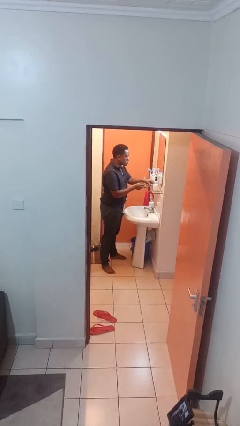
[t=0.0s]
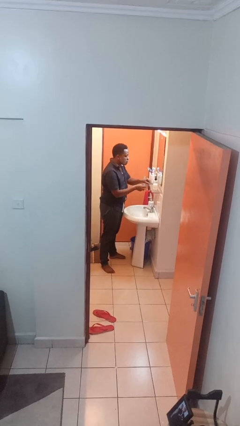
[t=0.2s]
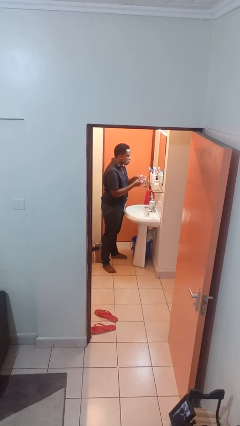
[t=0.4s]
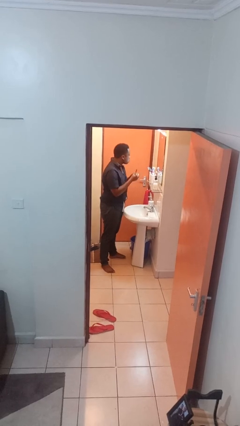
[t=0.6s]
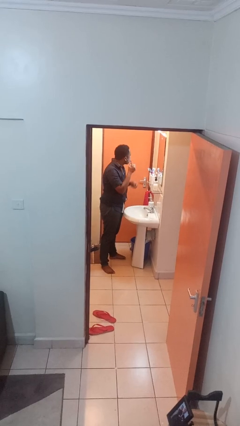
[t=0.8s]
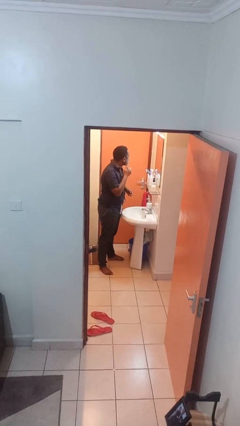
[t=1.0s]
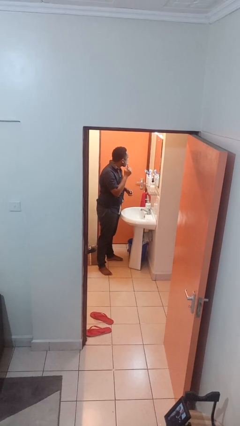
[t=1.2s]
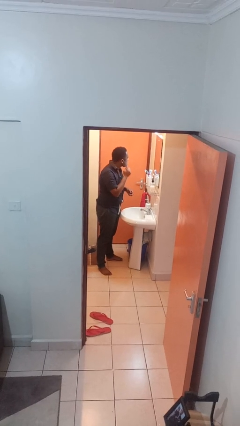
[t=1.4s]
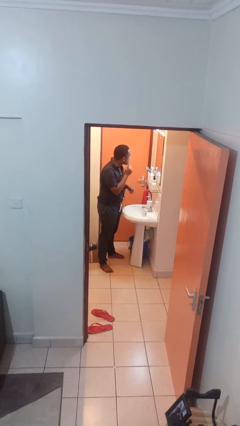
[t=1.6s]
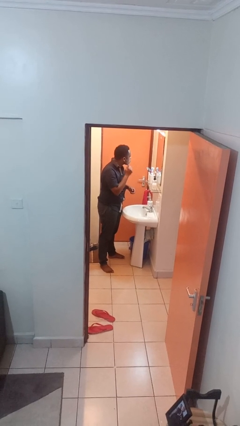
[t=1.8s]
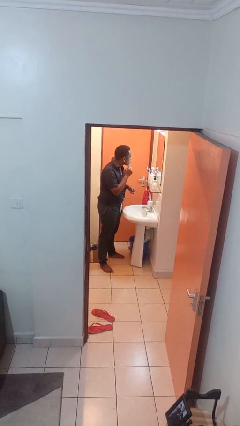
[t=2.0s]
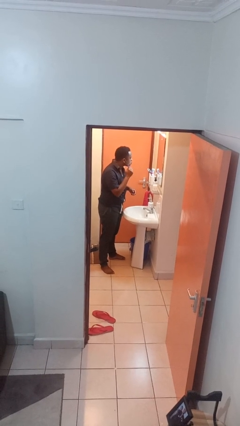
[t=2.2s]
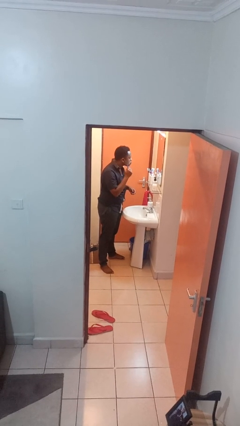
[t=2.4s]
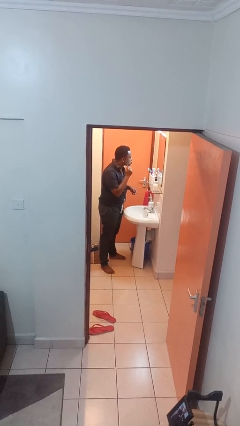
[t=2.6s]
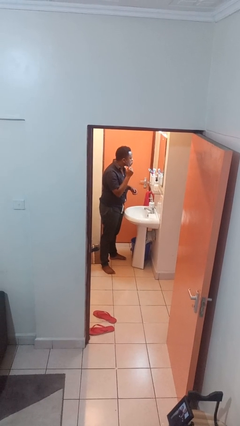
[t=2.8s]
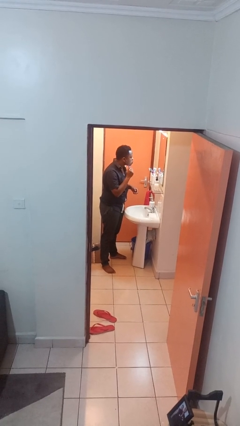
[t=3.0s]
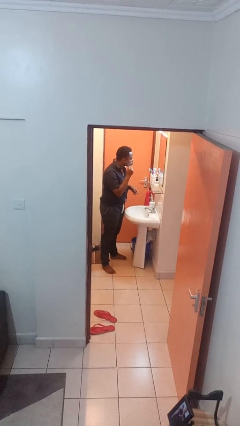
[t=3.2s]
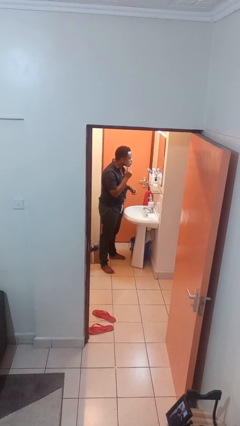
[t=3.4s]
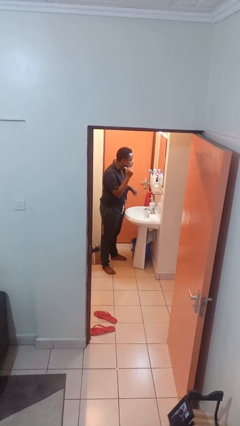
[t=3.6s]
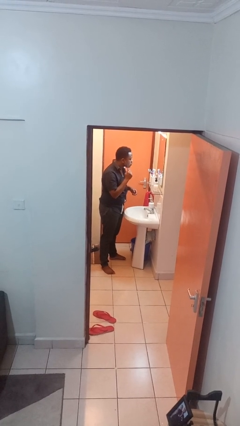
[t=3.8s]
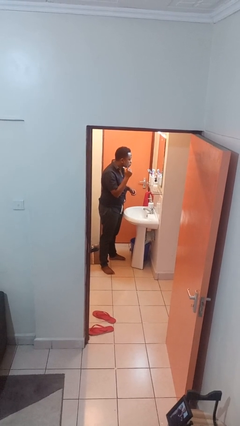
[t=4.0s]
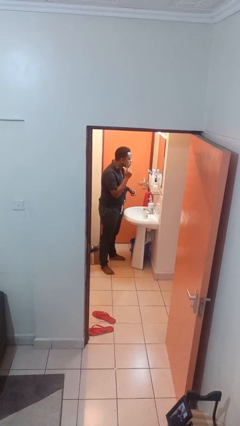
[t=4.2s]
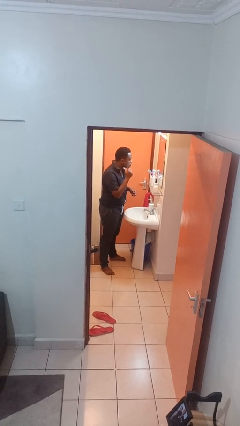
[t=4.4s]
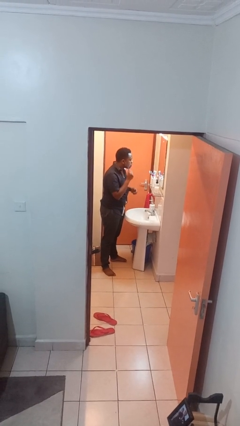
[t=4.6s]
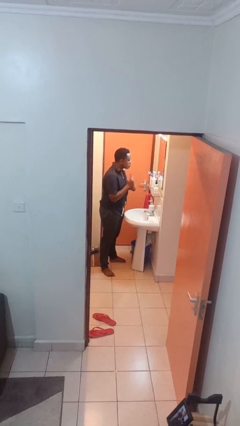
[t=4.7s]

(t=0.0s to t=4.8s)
person shaves face

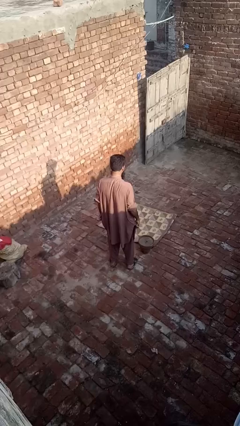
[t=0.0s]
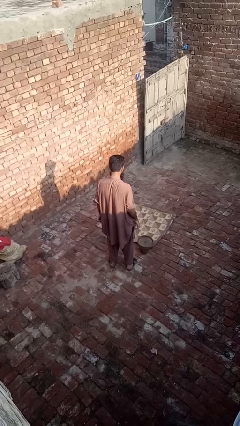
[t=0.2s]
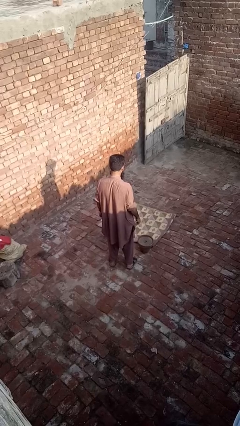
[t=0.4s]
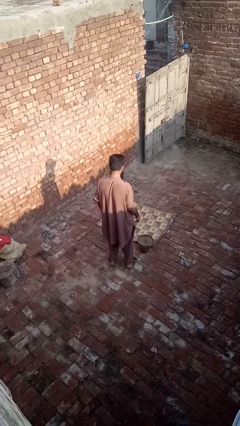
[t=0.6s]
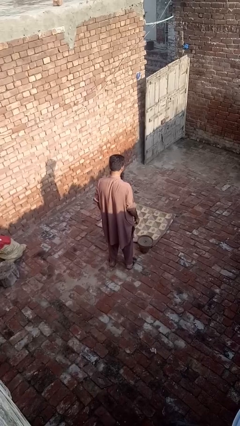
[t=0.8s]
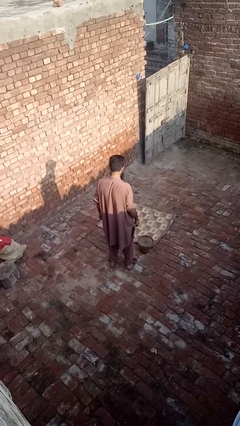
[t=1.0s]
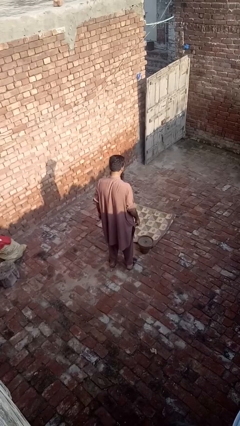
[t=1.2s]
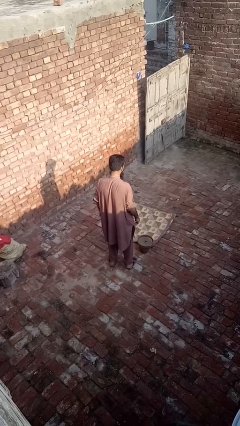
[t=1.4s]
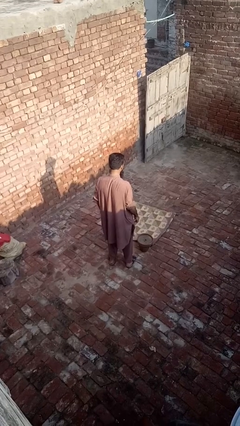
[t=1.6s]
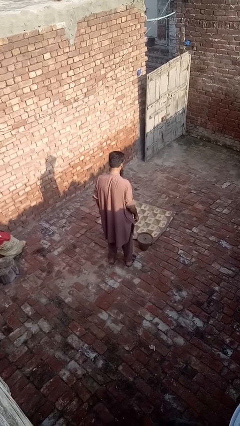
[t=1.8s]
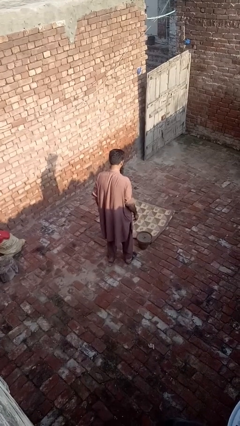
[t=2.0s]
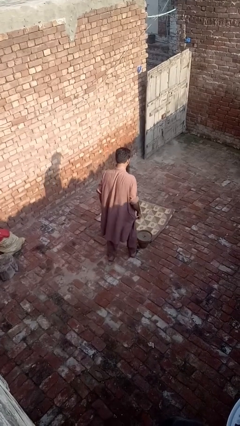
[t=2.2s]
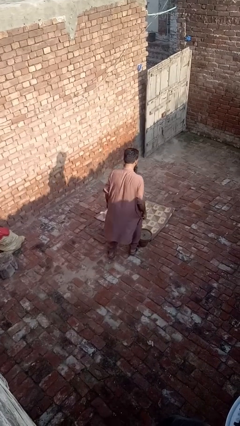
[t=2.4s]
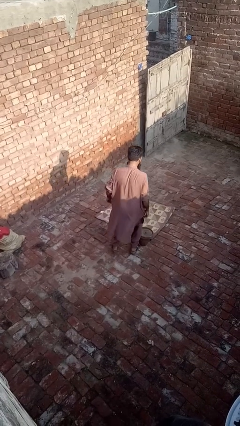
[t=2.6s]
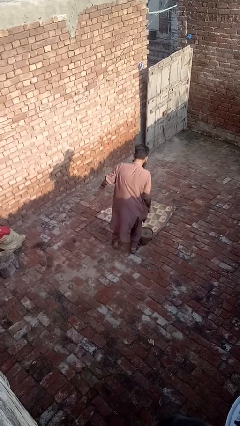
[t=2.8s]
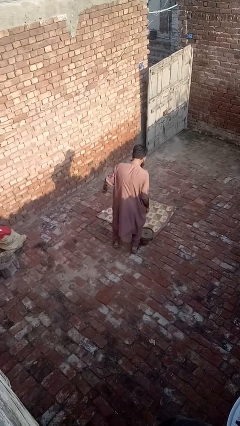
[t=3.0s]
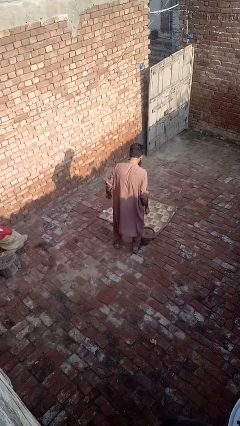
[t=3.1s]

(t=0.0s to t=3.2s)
person trips on object on floor

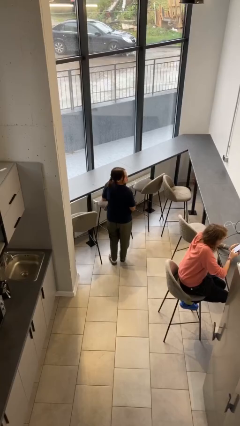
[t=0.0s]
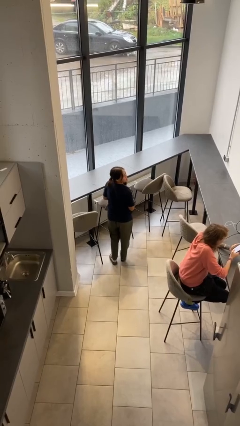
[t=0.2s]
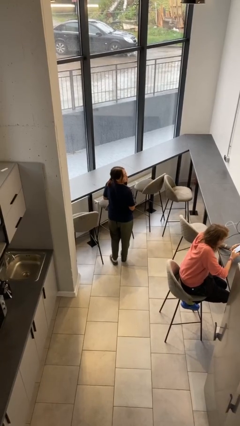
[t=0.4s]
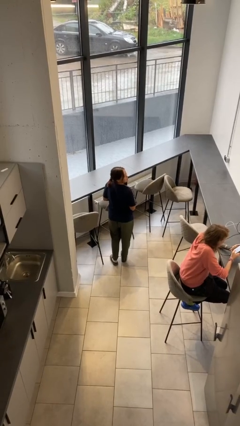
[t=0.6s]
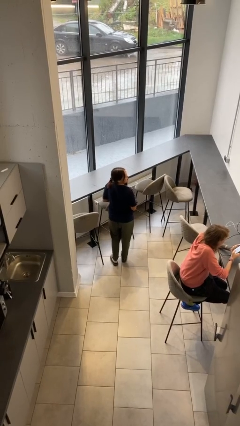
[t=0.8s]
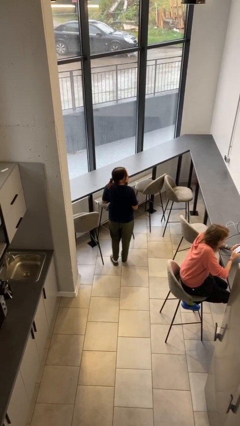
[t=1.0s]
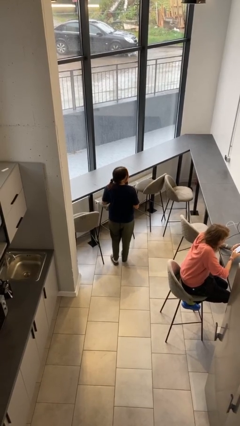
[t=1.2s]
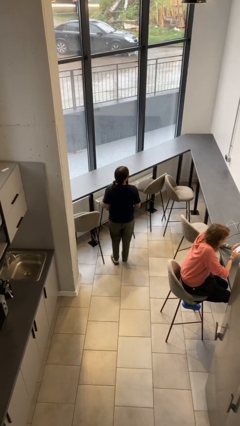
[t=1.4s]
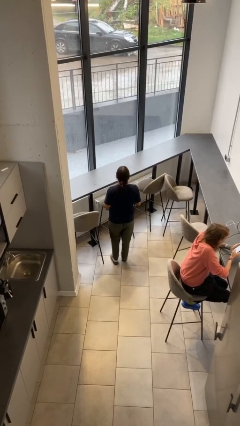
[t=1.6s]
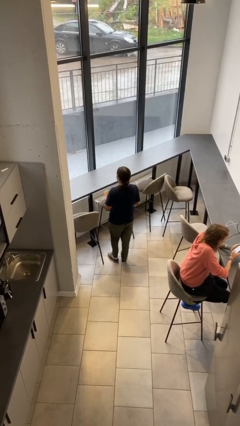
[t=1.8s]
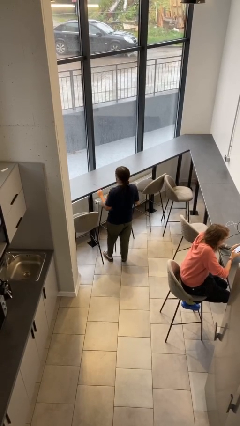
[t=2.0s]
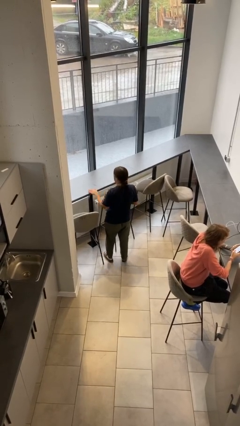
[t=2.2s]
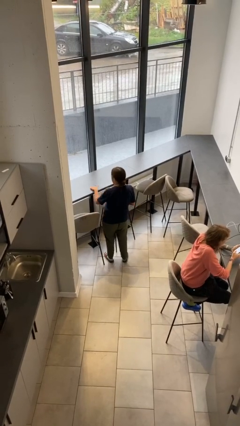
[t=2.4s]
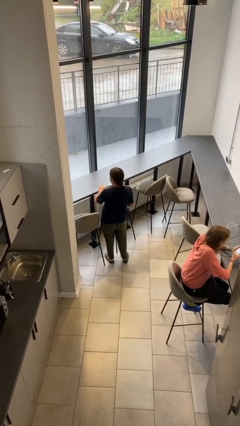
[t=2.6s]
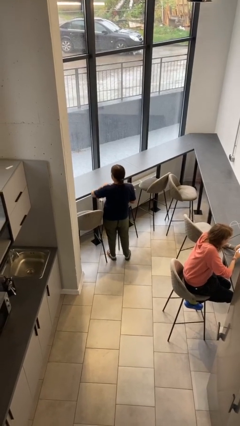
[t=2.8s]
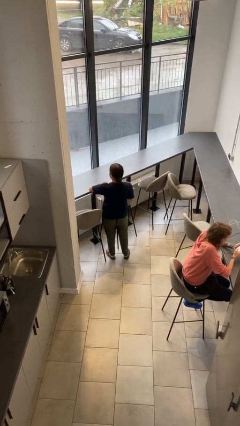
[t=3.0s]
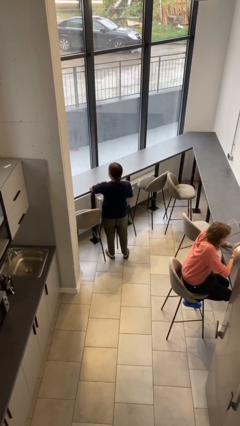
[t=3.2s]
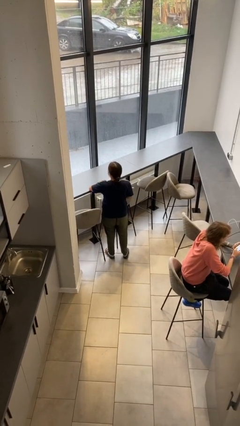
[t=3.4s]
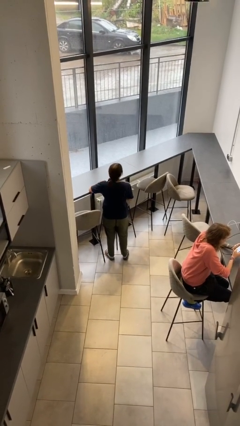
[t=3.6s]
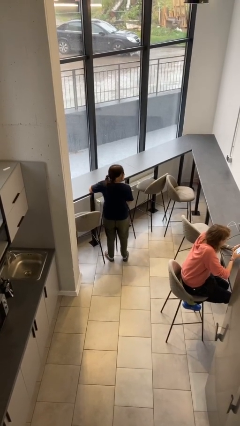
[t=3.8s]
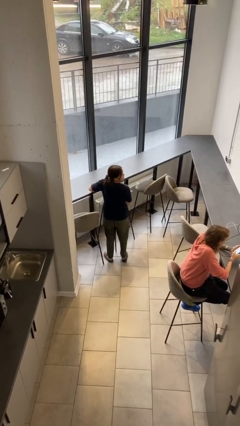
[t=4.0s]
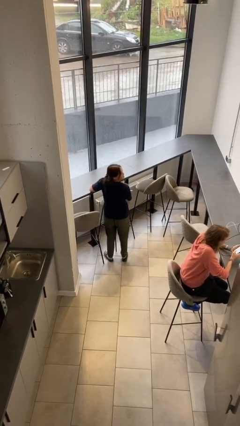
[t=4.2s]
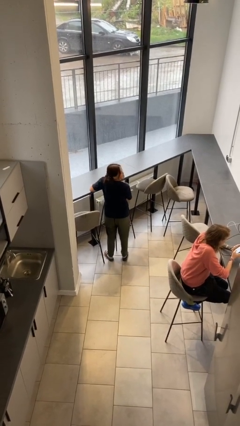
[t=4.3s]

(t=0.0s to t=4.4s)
person looks over shoulder

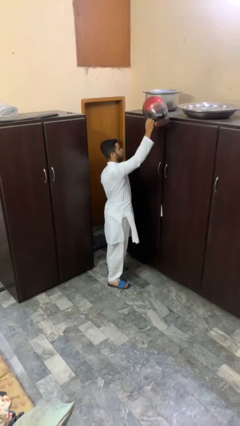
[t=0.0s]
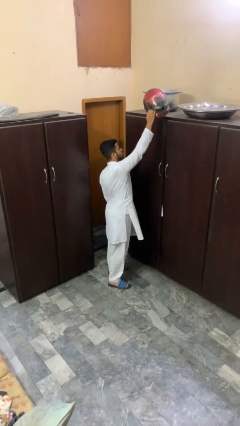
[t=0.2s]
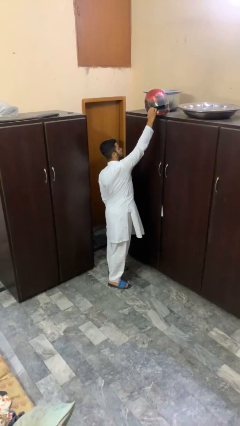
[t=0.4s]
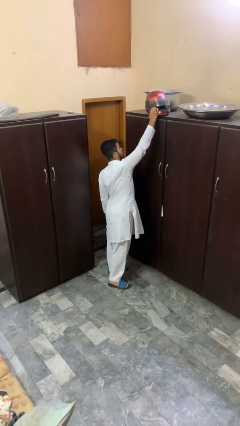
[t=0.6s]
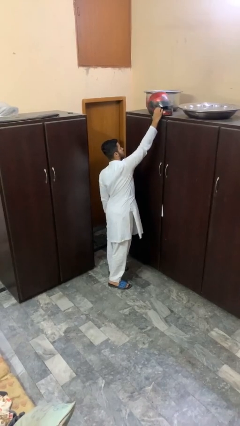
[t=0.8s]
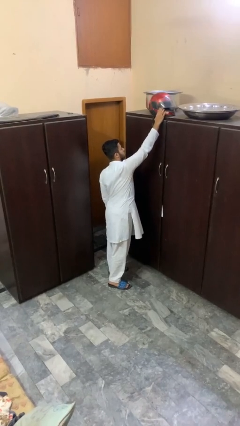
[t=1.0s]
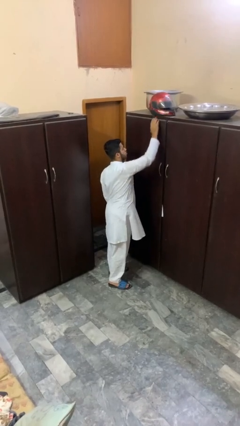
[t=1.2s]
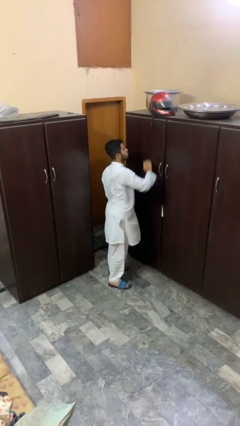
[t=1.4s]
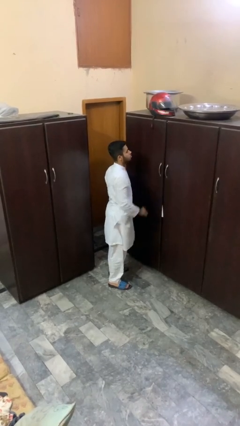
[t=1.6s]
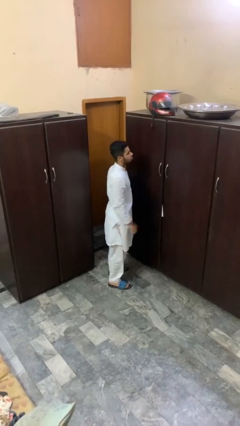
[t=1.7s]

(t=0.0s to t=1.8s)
person puts down object on shelf

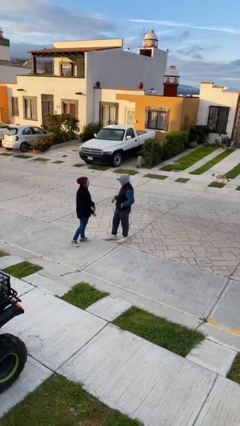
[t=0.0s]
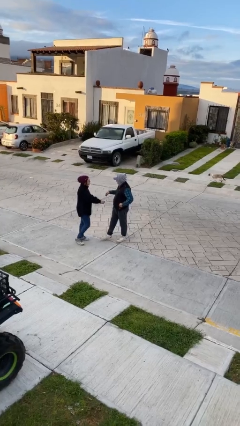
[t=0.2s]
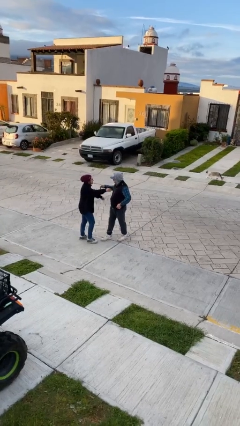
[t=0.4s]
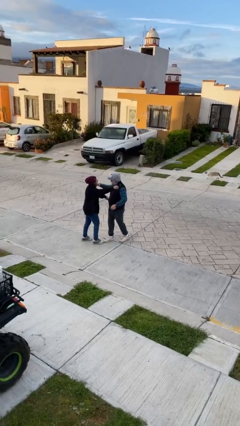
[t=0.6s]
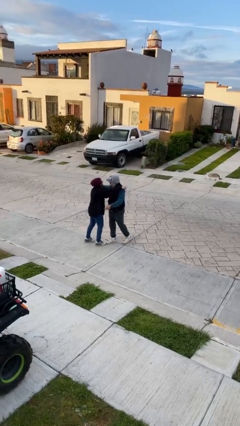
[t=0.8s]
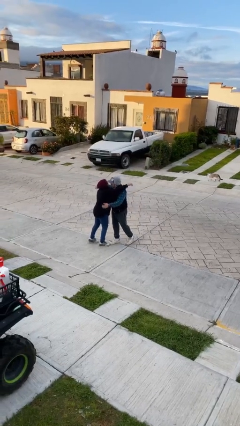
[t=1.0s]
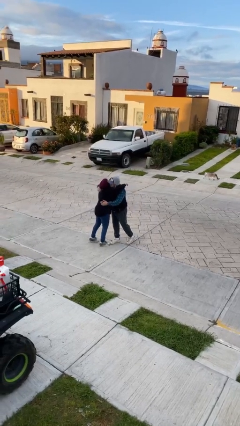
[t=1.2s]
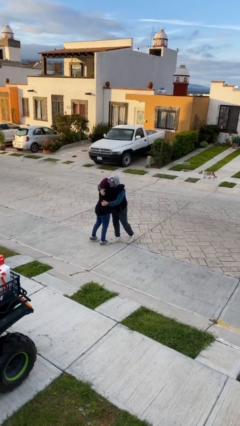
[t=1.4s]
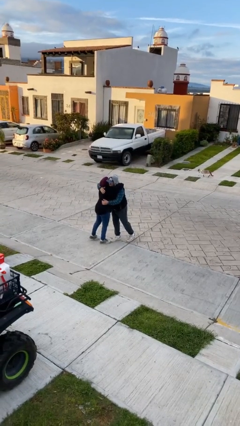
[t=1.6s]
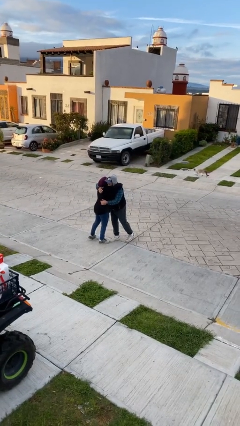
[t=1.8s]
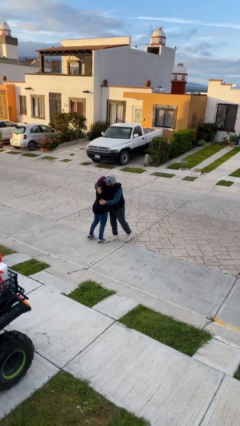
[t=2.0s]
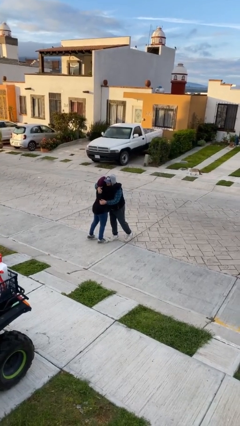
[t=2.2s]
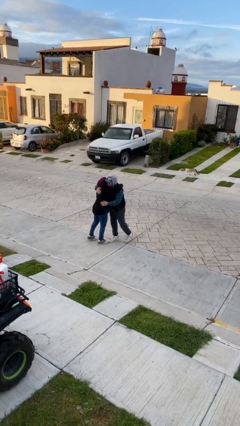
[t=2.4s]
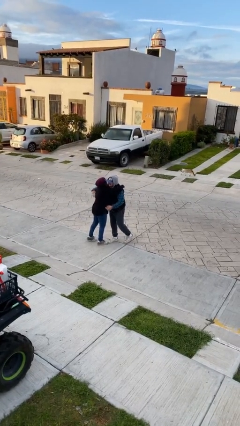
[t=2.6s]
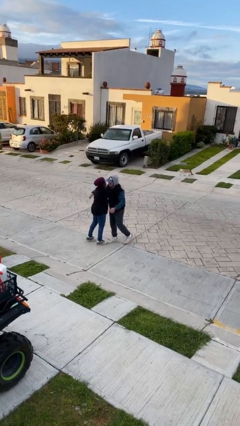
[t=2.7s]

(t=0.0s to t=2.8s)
person embraces person

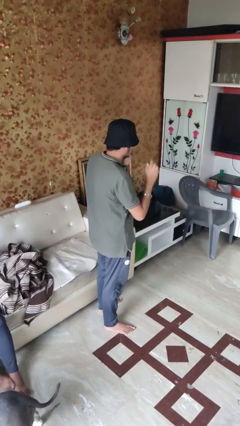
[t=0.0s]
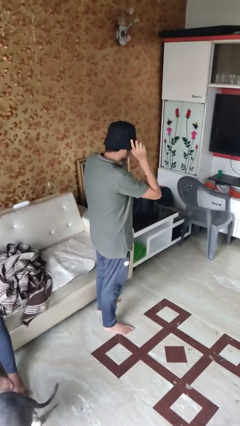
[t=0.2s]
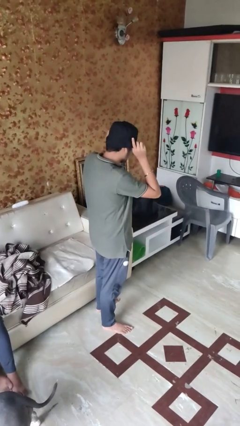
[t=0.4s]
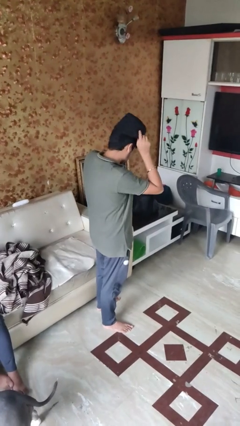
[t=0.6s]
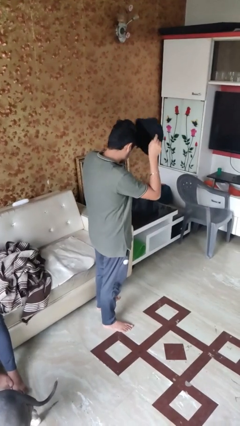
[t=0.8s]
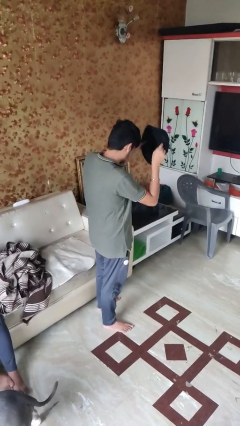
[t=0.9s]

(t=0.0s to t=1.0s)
person takes off hat
